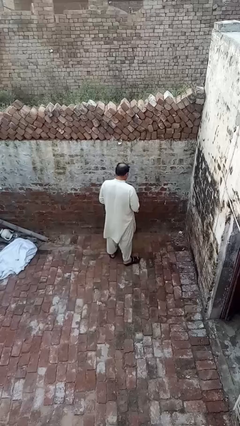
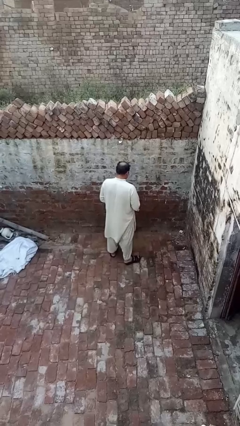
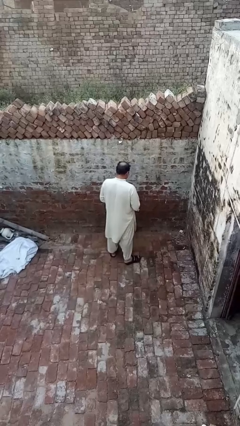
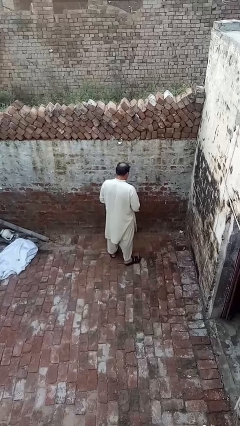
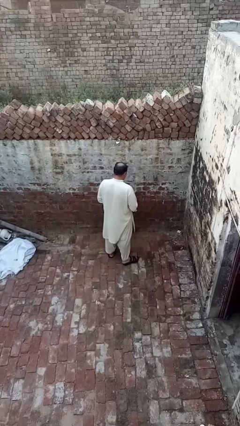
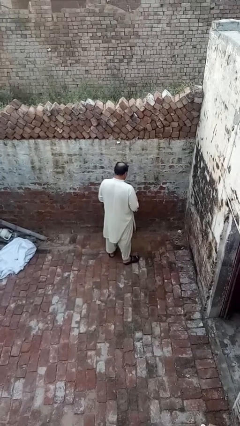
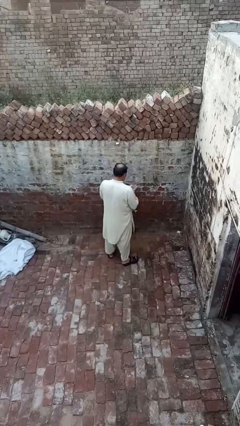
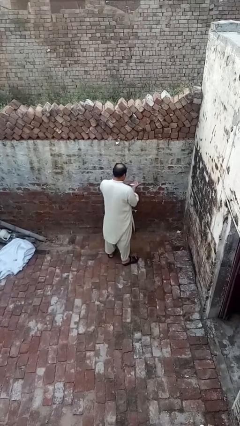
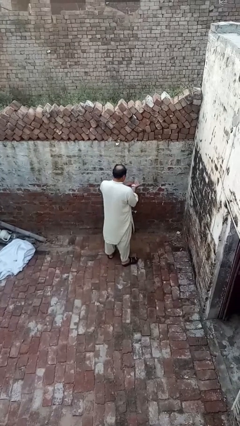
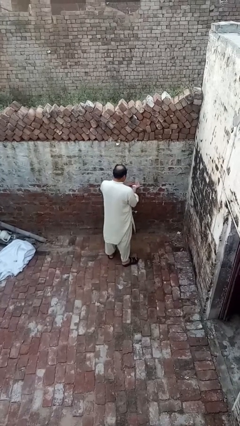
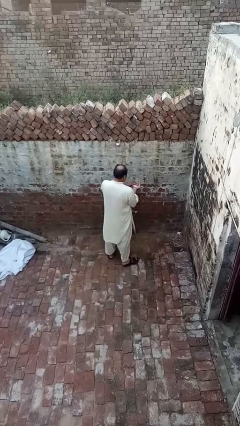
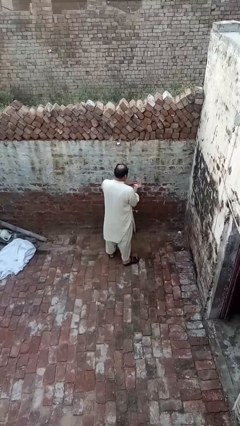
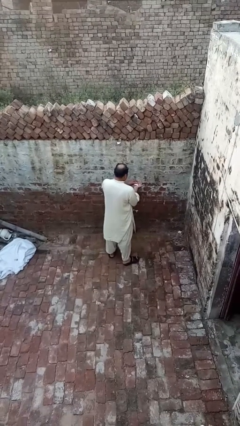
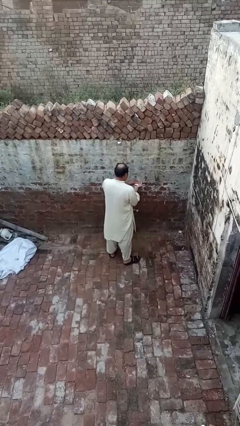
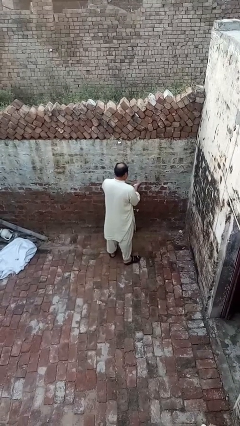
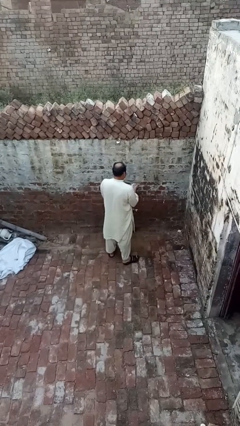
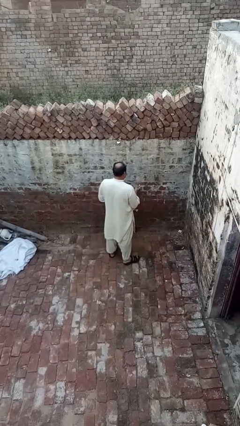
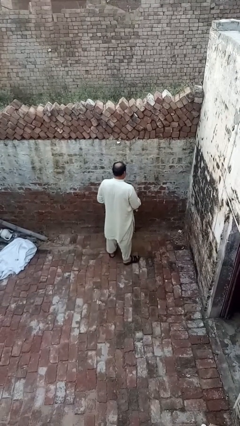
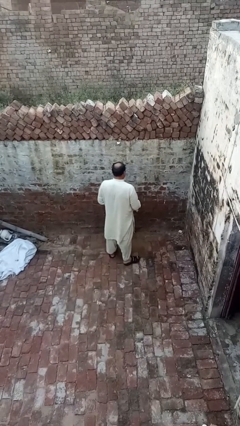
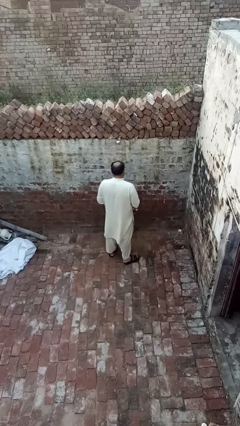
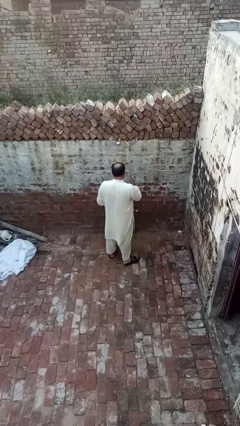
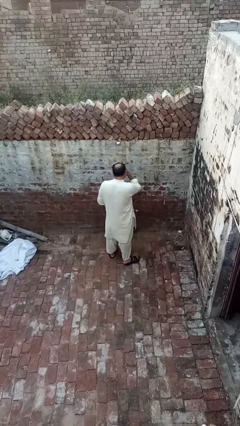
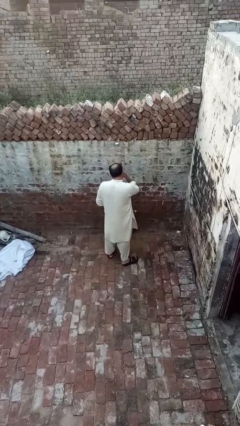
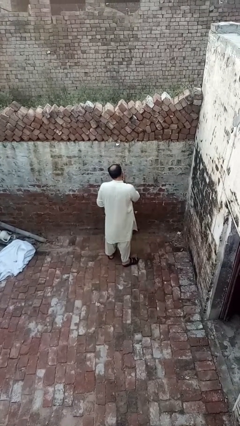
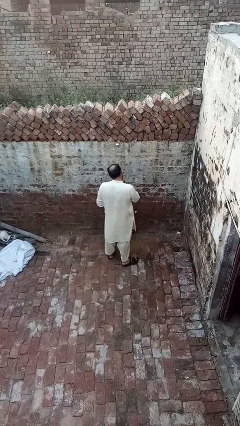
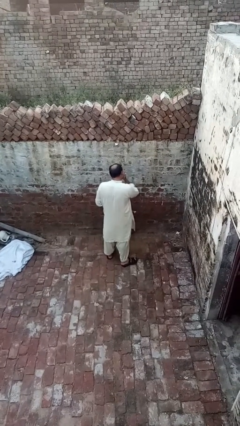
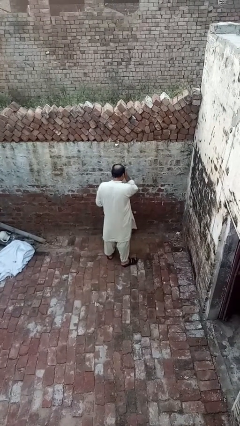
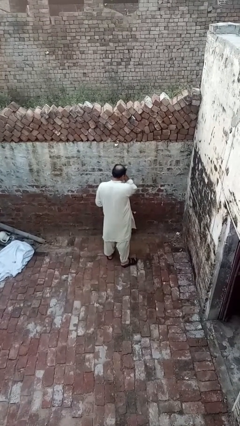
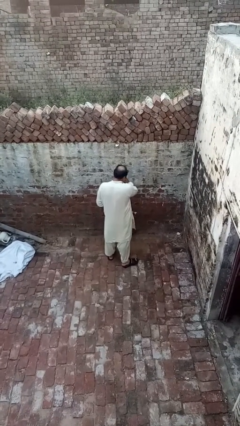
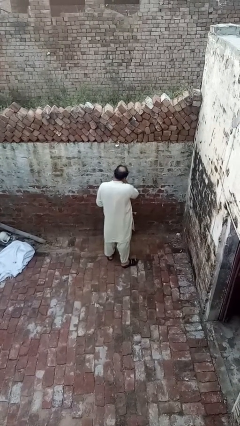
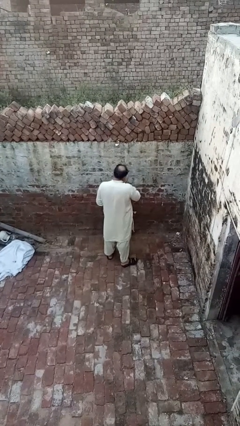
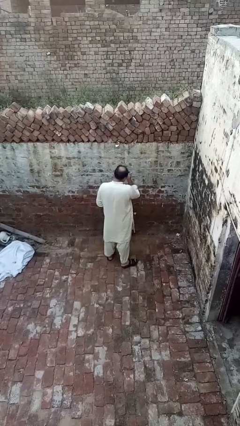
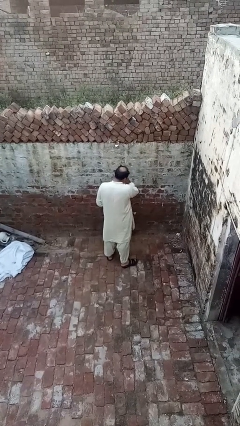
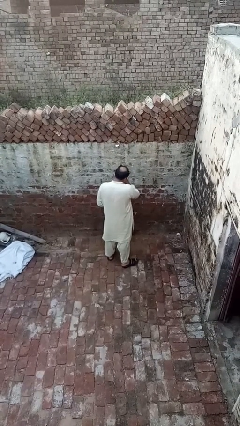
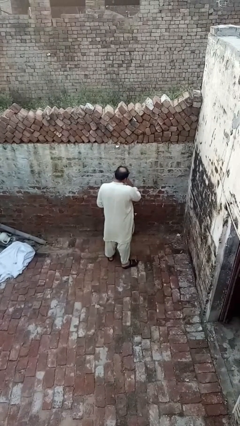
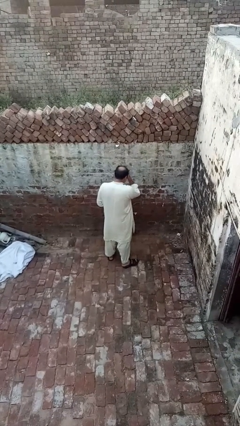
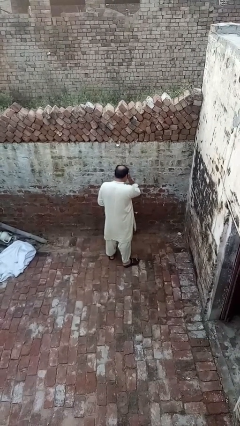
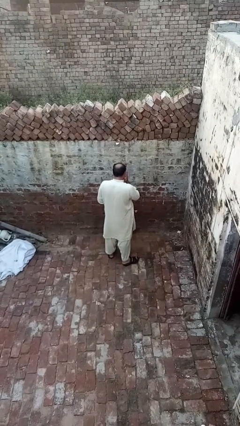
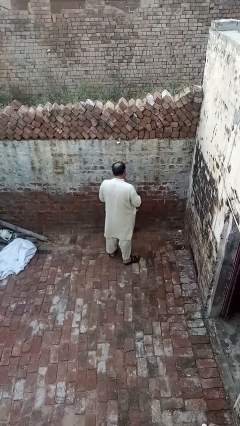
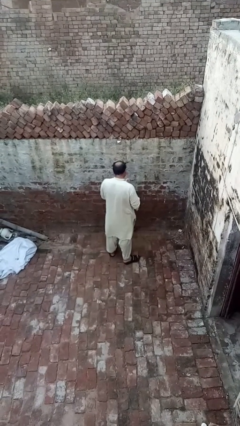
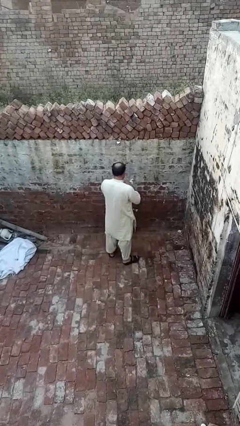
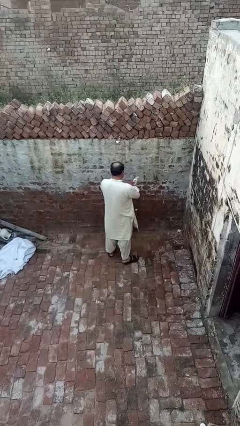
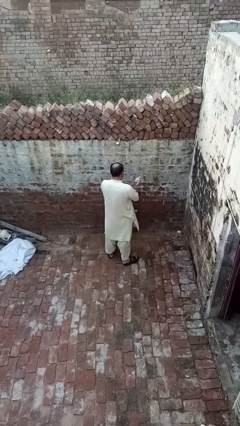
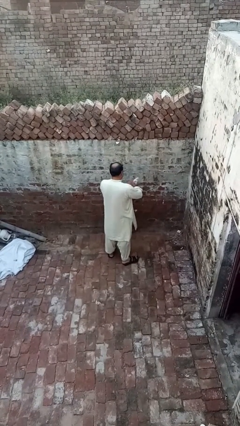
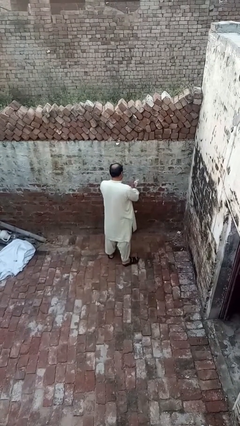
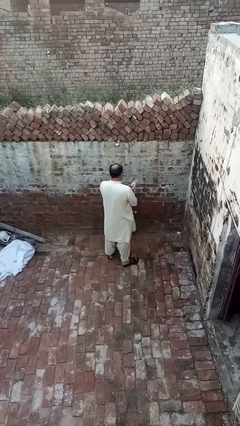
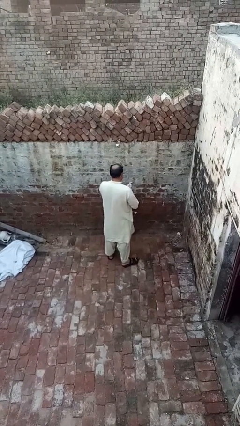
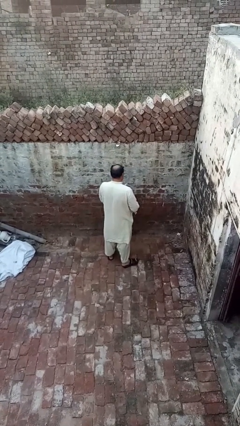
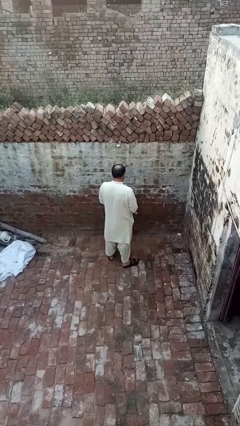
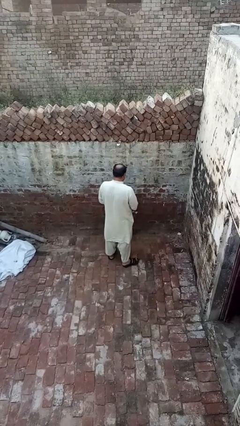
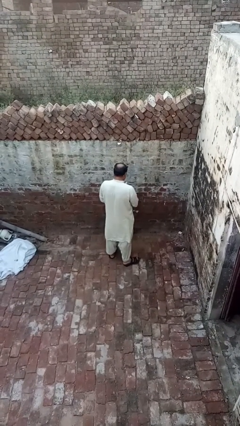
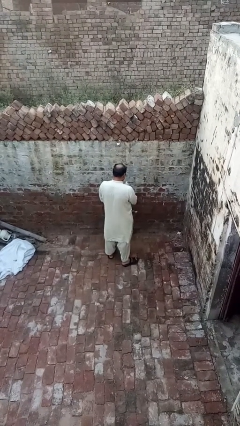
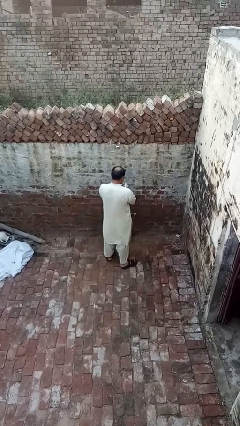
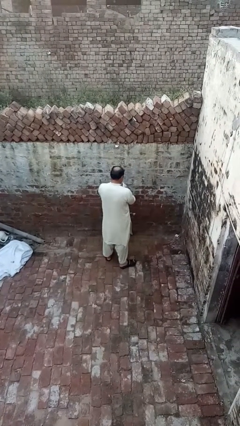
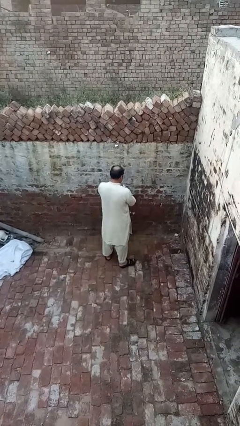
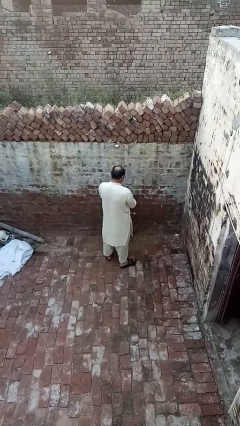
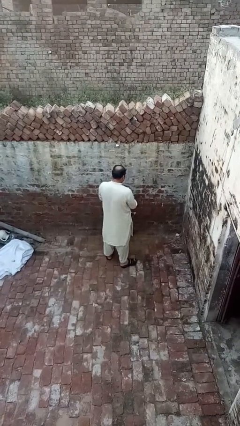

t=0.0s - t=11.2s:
person applies sunscreen

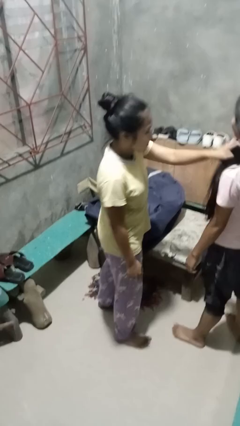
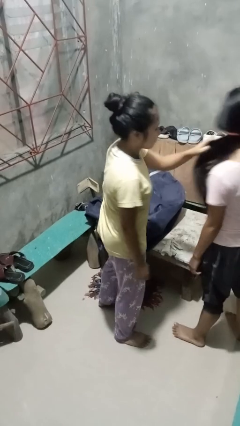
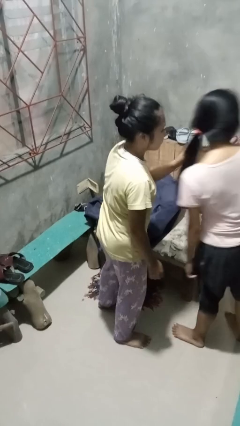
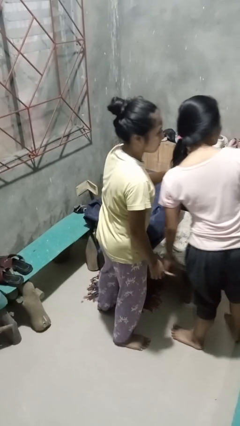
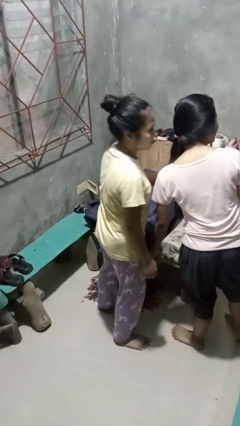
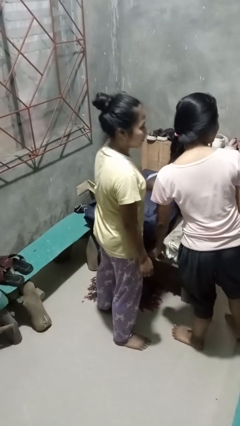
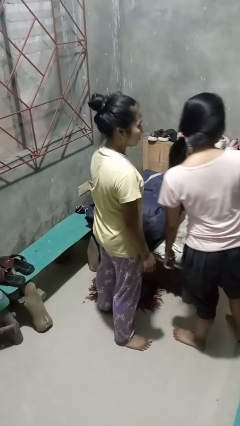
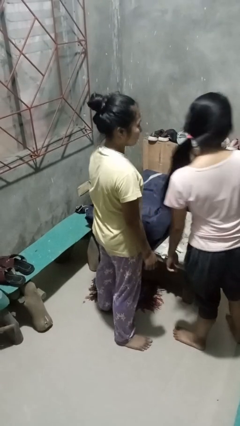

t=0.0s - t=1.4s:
person grabs person by hair

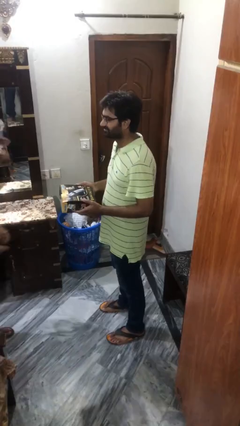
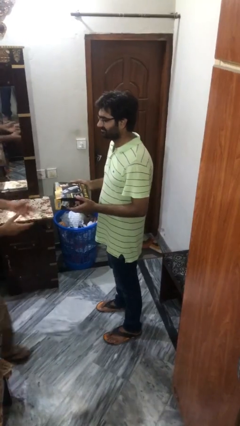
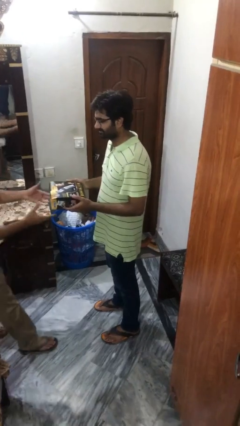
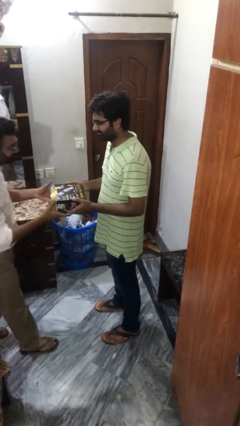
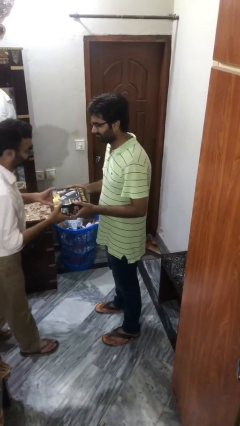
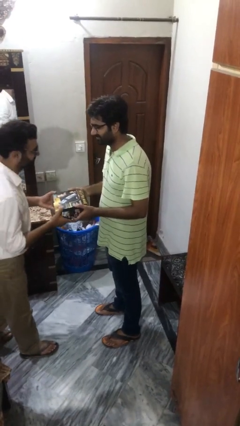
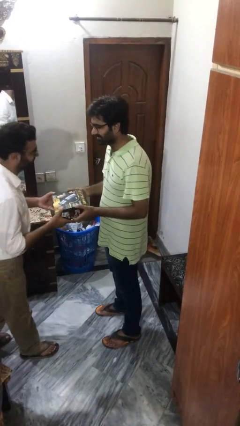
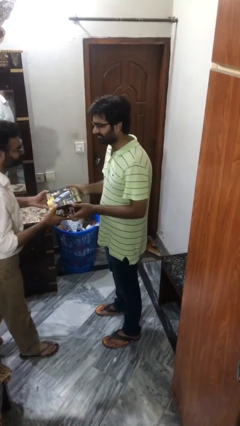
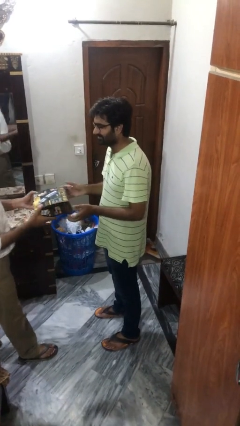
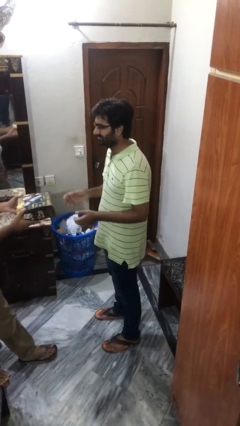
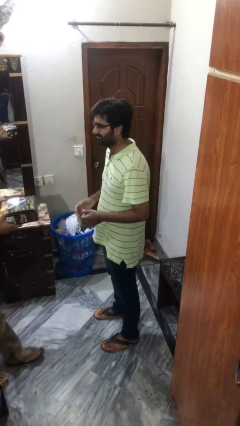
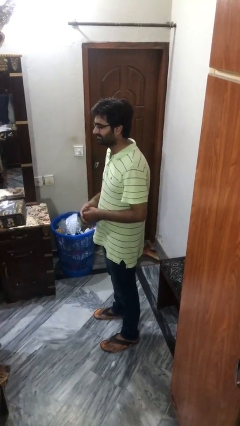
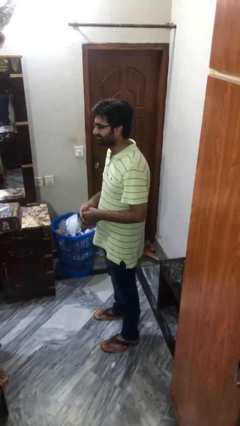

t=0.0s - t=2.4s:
person transfers object to person

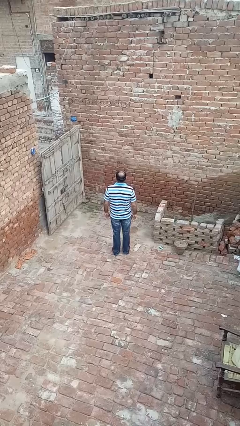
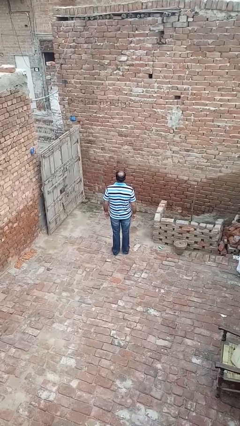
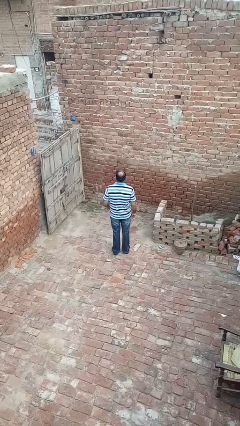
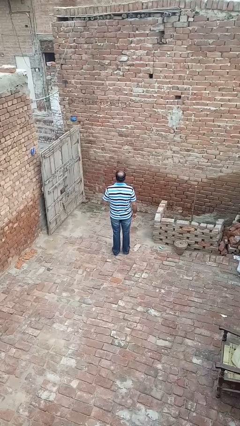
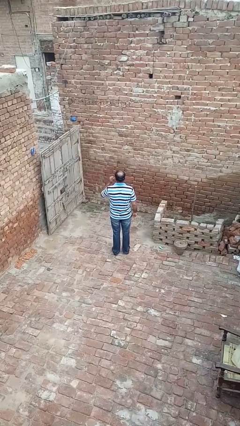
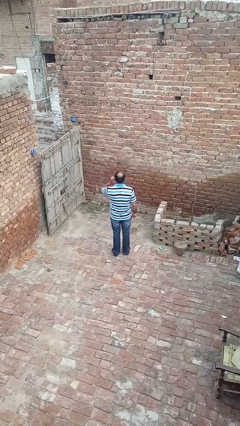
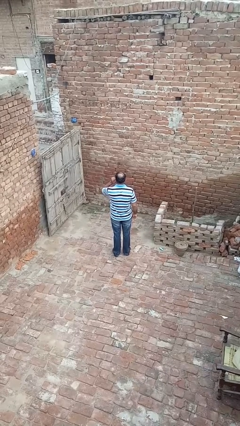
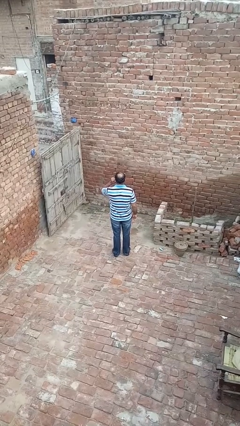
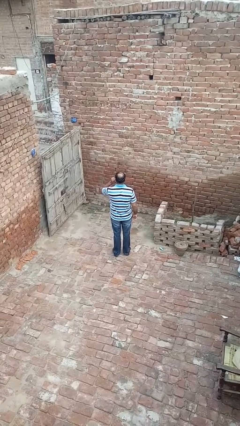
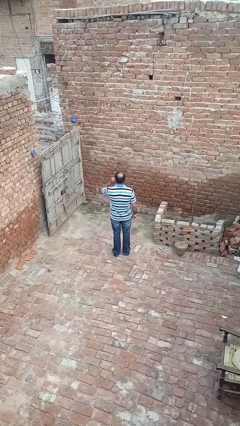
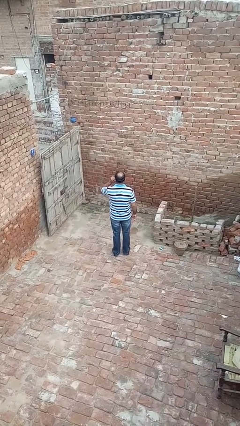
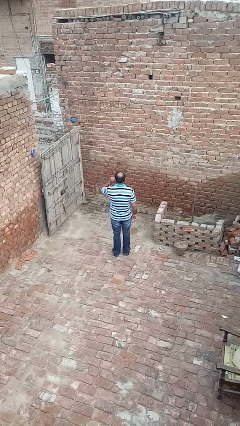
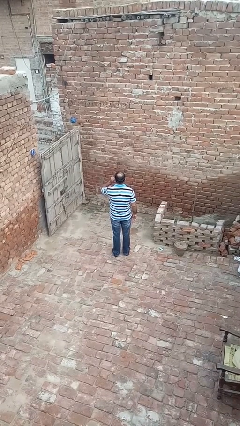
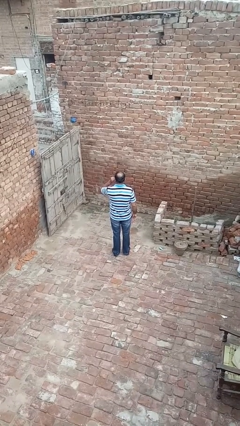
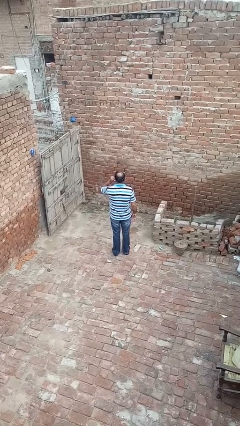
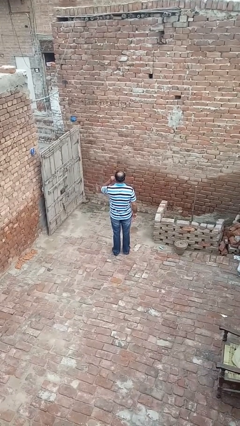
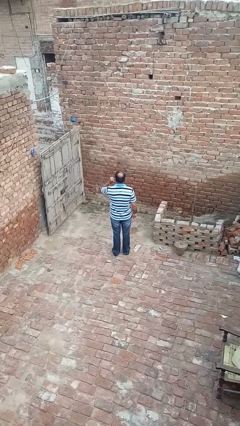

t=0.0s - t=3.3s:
person touches earlobe
